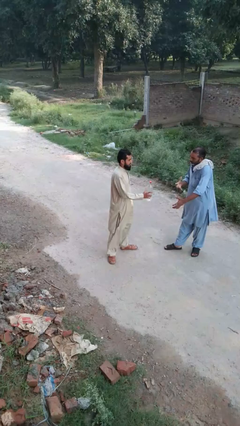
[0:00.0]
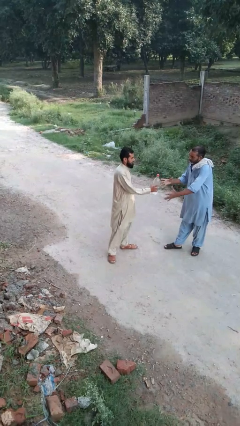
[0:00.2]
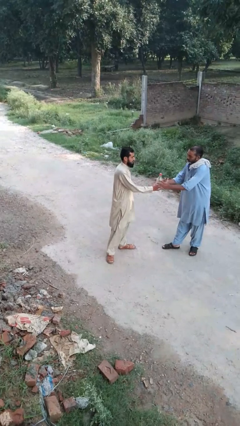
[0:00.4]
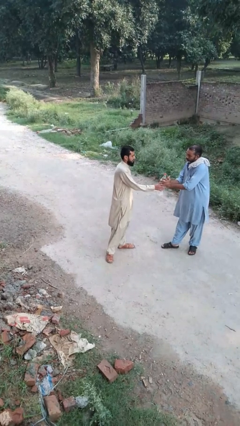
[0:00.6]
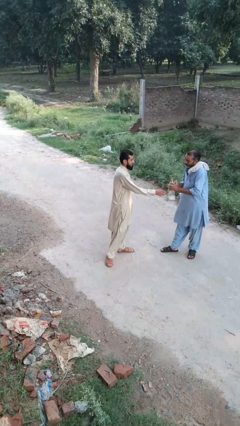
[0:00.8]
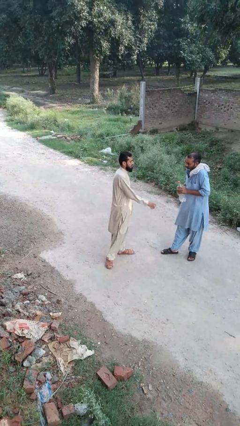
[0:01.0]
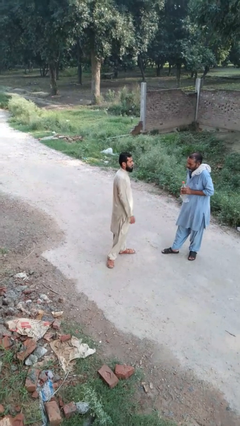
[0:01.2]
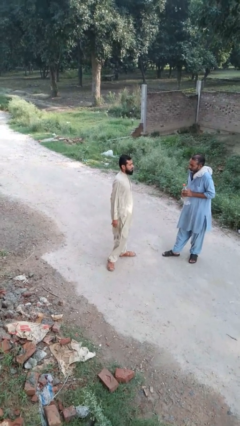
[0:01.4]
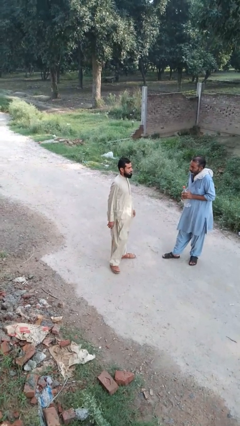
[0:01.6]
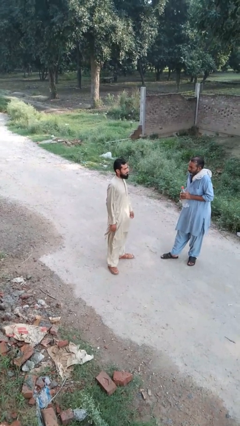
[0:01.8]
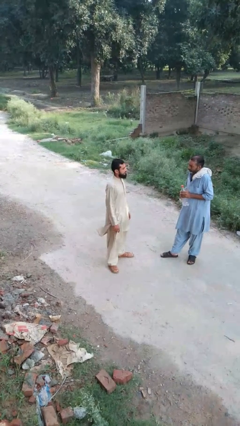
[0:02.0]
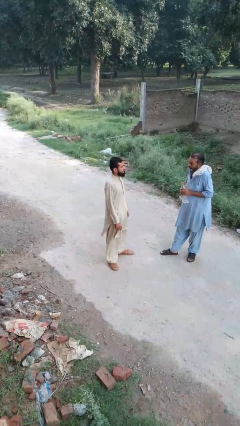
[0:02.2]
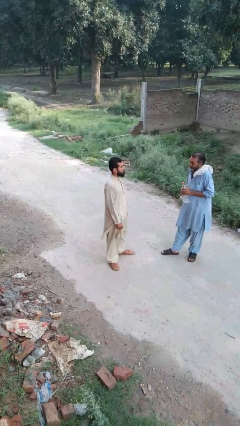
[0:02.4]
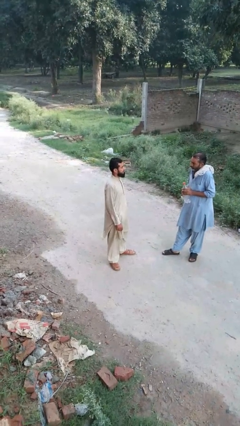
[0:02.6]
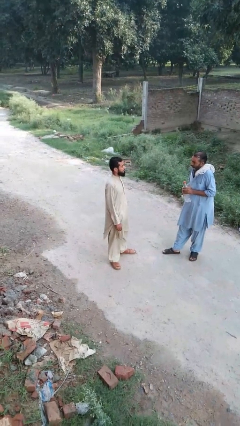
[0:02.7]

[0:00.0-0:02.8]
person transfers object to person

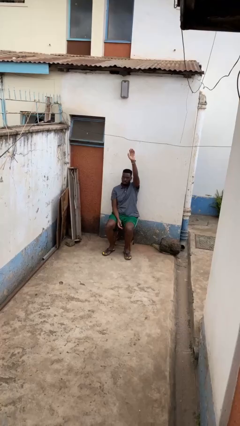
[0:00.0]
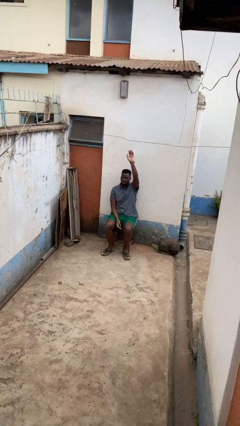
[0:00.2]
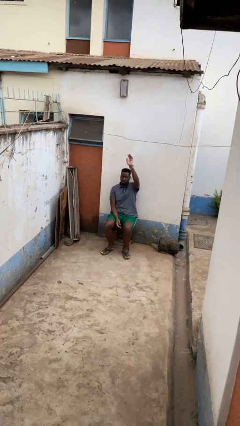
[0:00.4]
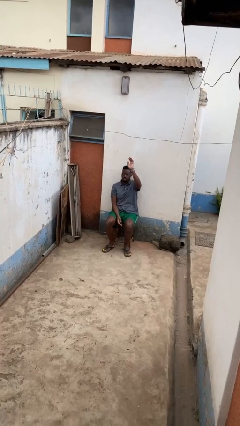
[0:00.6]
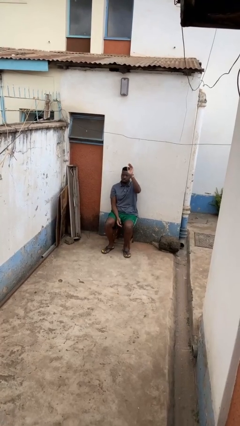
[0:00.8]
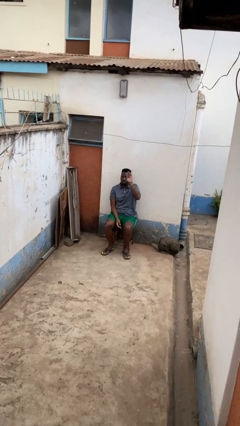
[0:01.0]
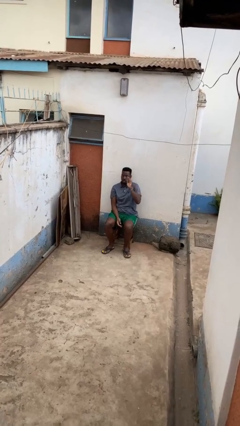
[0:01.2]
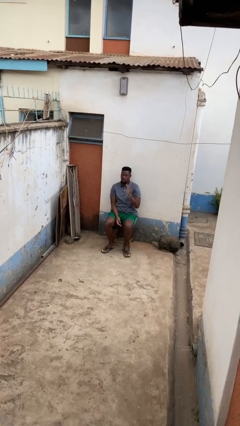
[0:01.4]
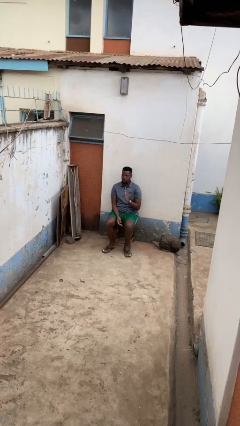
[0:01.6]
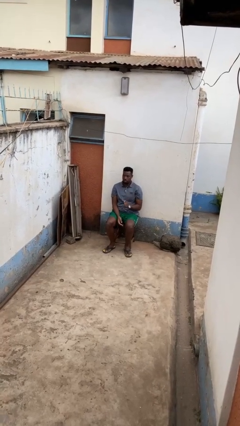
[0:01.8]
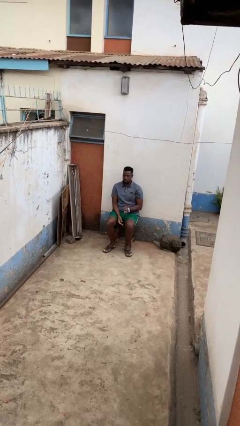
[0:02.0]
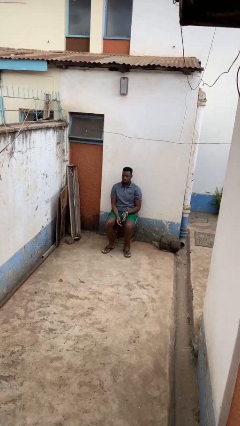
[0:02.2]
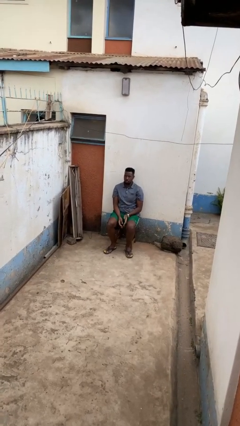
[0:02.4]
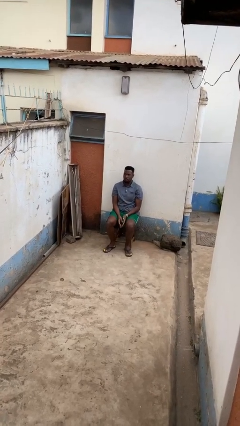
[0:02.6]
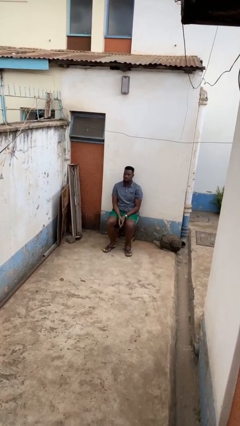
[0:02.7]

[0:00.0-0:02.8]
person gestures lower hand

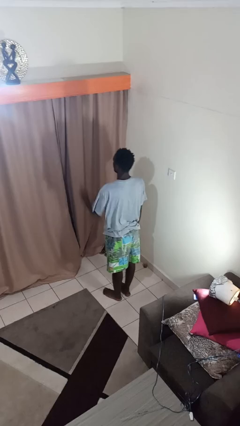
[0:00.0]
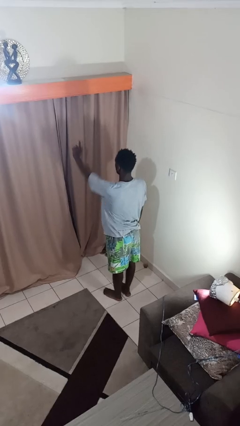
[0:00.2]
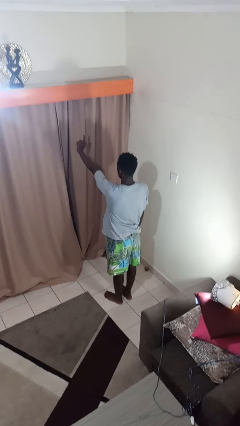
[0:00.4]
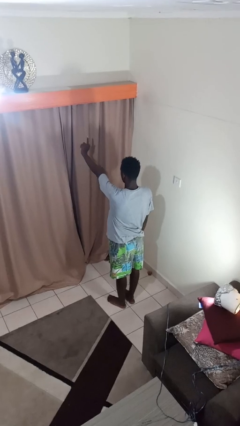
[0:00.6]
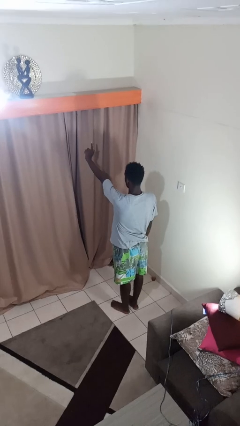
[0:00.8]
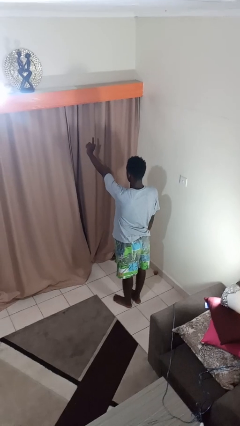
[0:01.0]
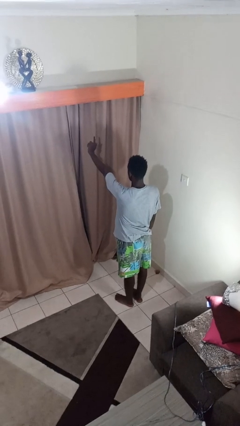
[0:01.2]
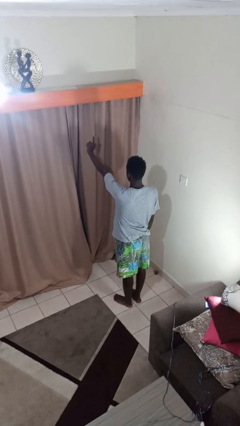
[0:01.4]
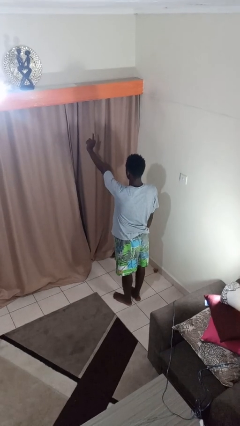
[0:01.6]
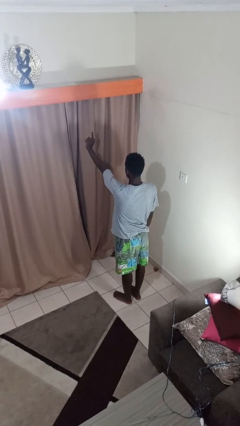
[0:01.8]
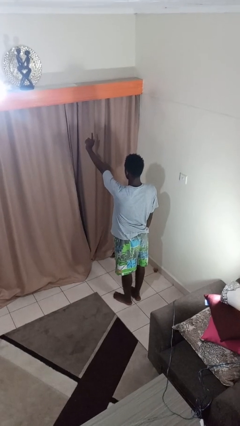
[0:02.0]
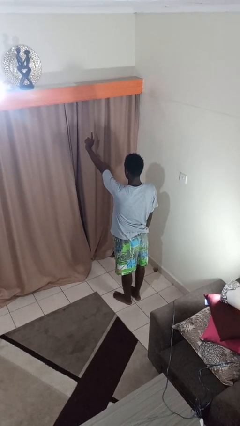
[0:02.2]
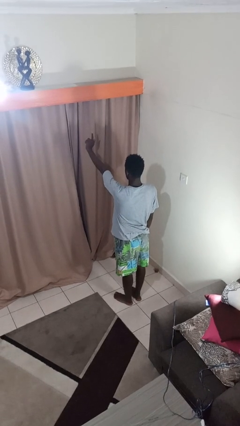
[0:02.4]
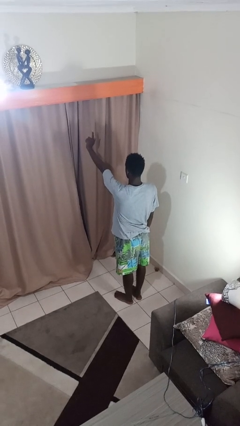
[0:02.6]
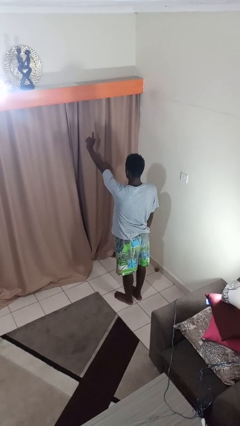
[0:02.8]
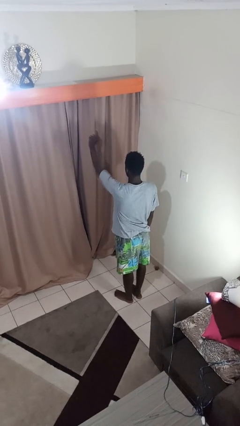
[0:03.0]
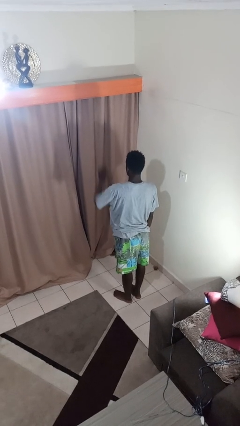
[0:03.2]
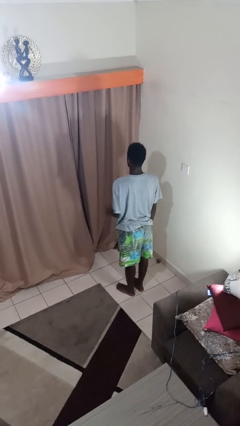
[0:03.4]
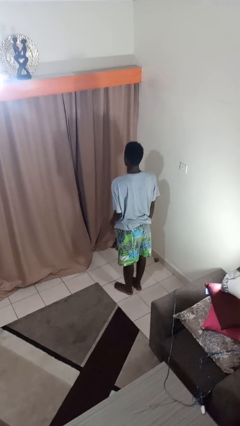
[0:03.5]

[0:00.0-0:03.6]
person gestures number one

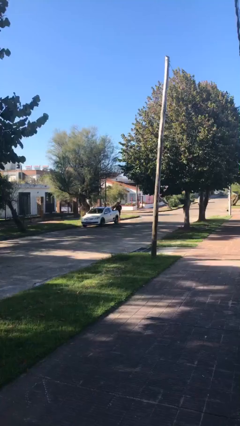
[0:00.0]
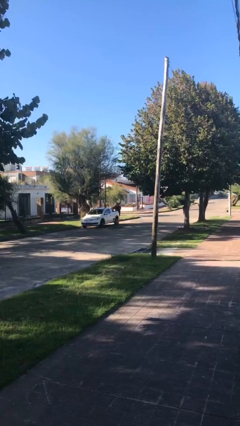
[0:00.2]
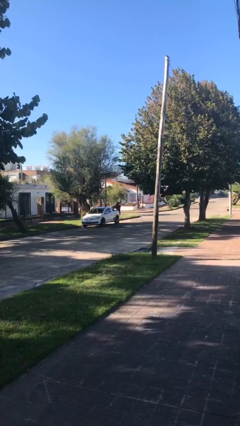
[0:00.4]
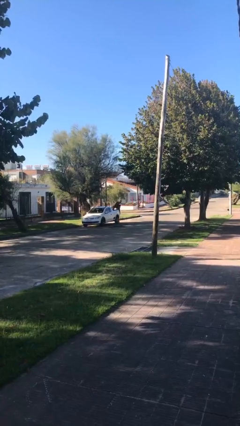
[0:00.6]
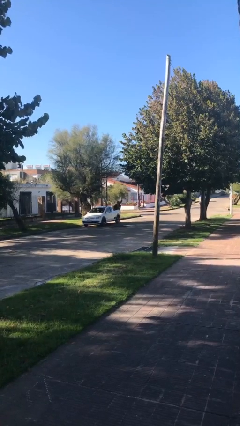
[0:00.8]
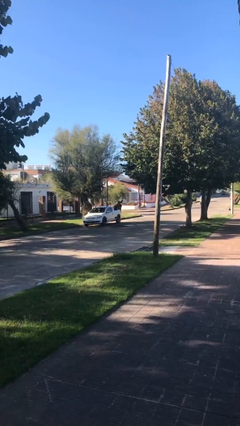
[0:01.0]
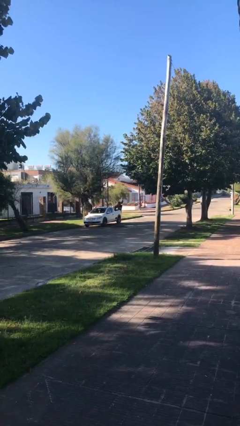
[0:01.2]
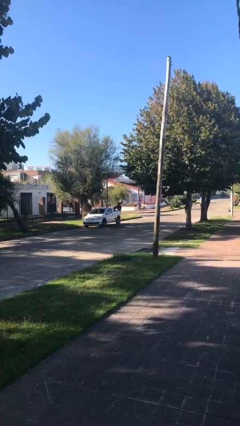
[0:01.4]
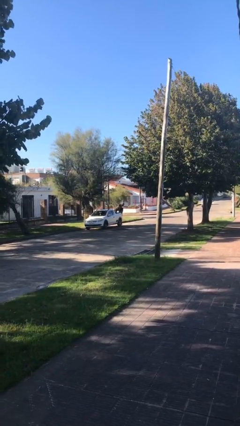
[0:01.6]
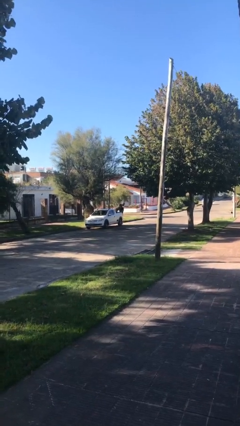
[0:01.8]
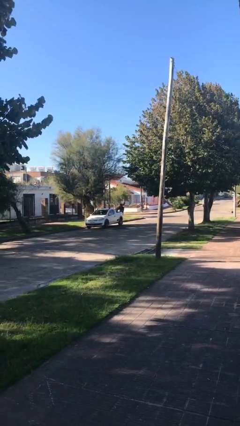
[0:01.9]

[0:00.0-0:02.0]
person loads car

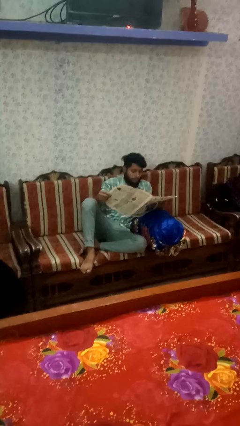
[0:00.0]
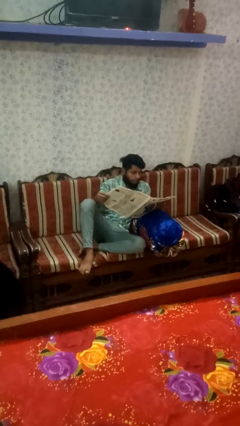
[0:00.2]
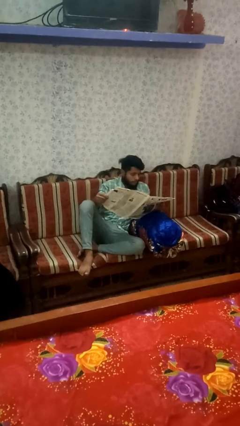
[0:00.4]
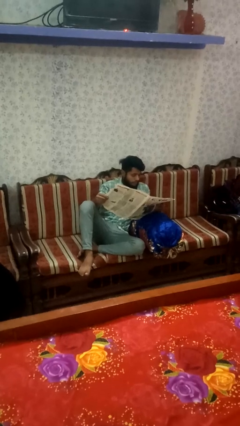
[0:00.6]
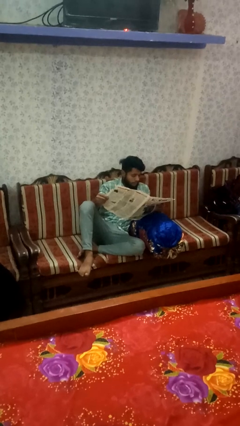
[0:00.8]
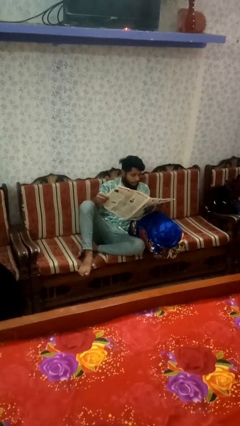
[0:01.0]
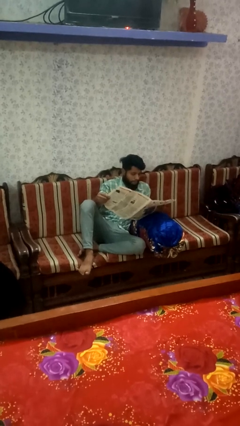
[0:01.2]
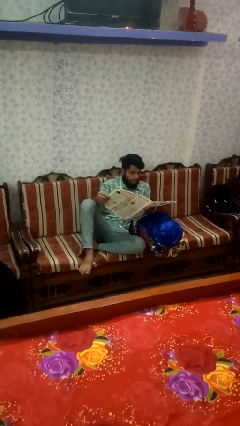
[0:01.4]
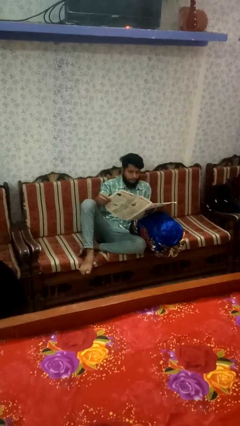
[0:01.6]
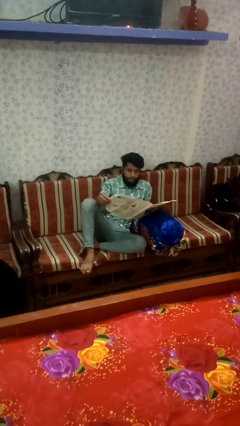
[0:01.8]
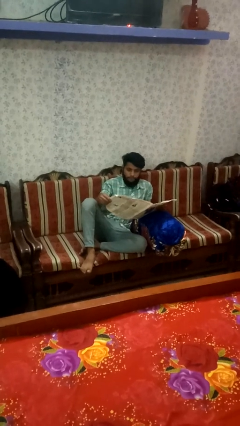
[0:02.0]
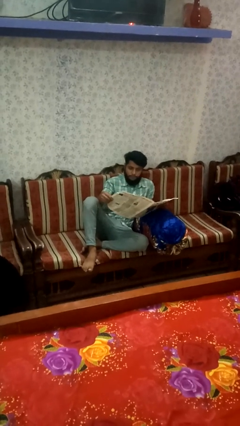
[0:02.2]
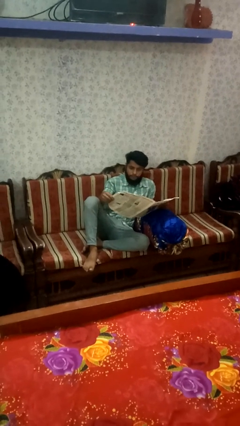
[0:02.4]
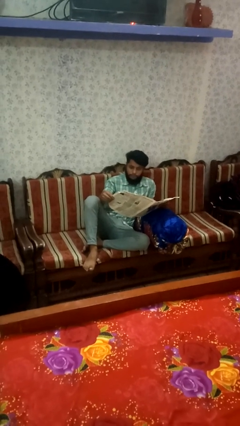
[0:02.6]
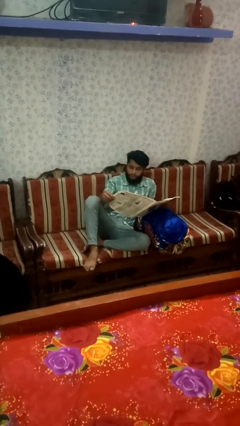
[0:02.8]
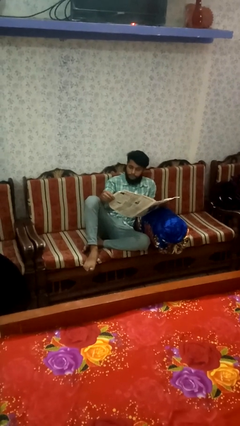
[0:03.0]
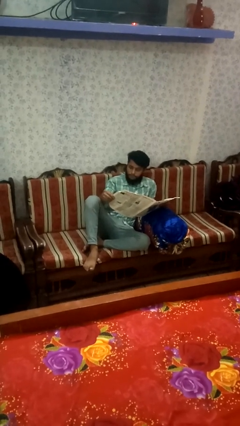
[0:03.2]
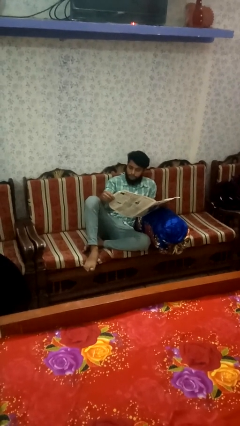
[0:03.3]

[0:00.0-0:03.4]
person reads newspaper

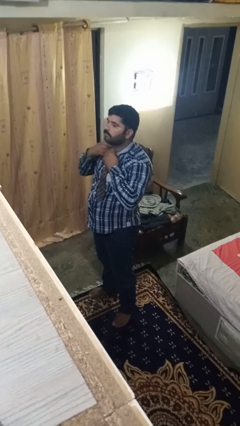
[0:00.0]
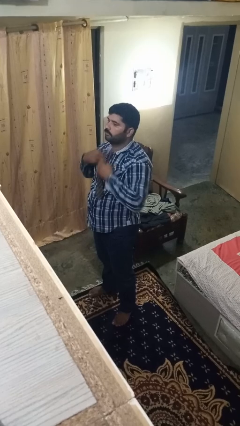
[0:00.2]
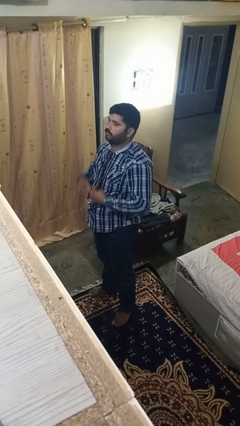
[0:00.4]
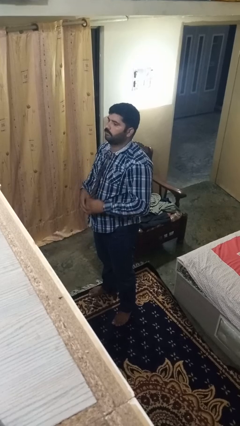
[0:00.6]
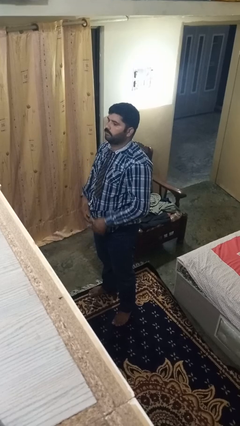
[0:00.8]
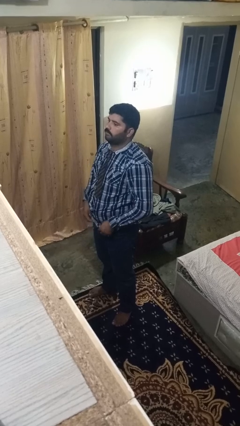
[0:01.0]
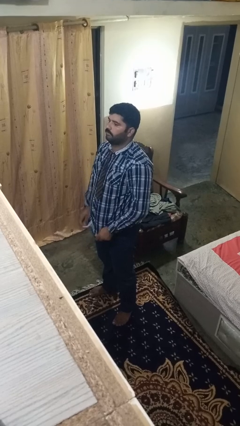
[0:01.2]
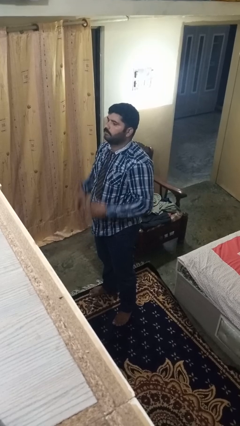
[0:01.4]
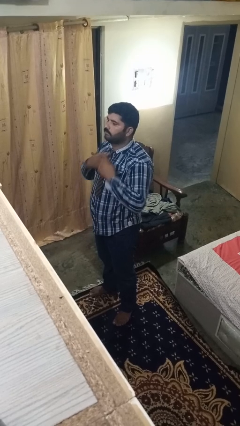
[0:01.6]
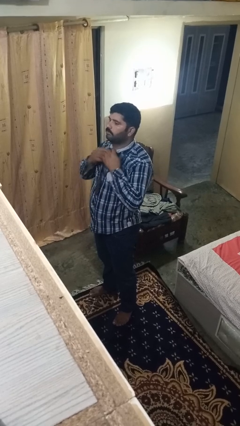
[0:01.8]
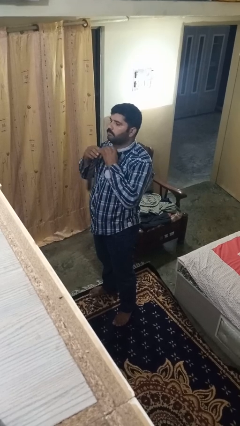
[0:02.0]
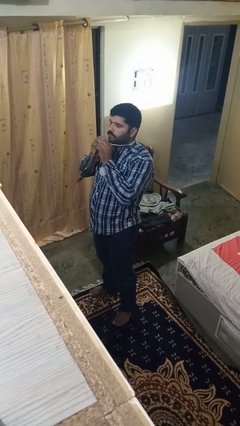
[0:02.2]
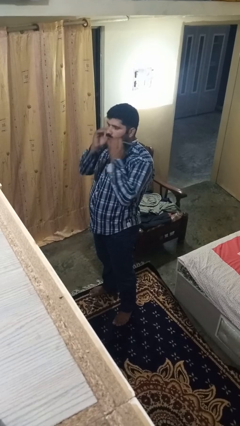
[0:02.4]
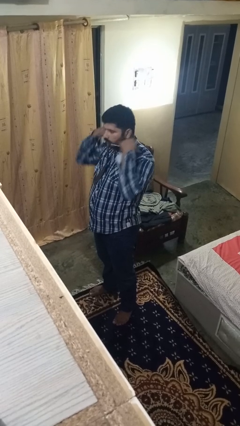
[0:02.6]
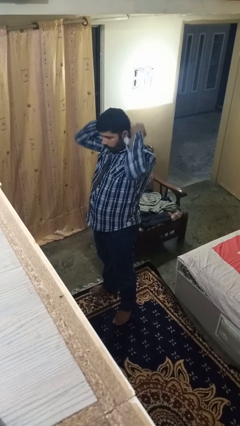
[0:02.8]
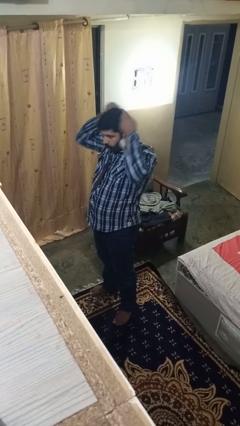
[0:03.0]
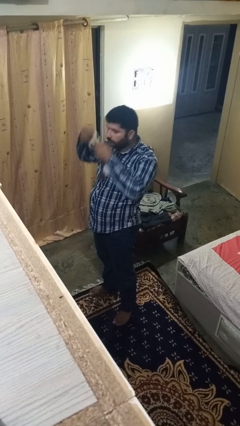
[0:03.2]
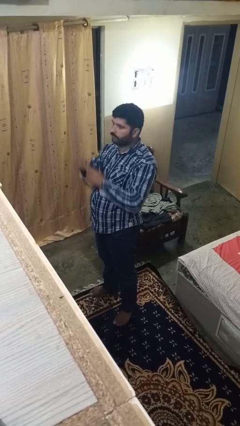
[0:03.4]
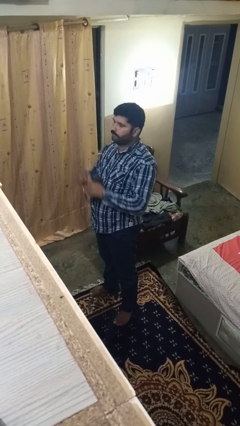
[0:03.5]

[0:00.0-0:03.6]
person takes off necktie
